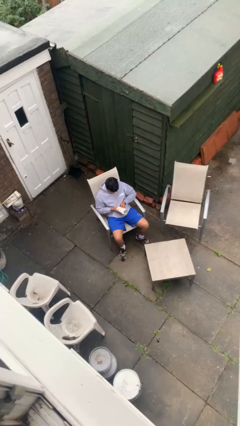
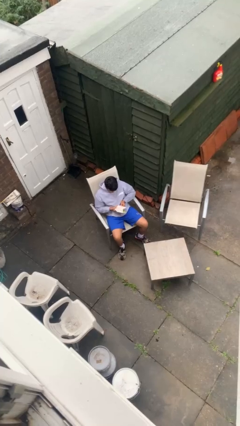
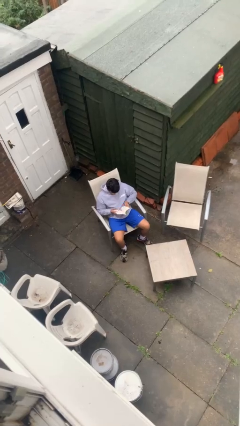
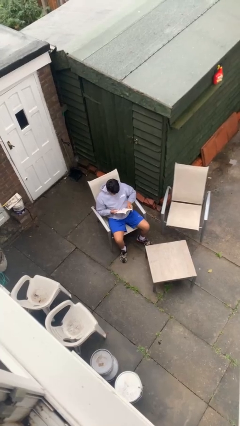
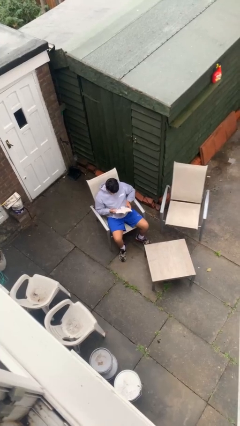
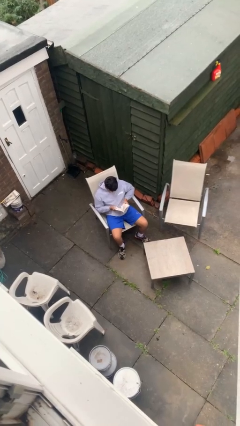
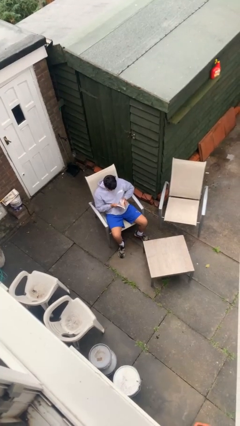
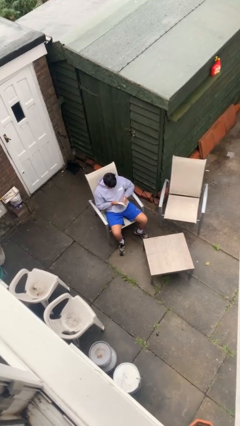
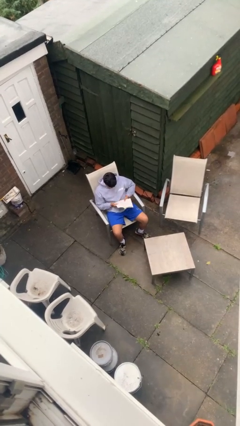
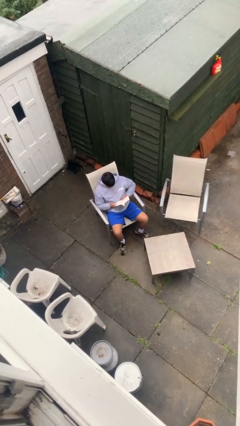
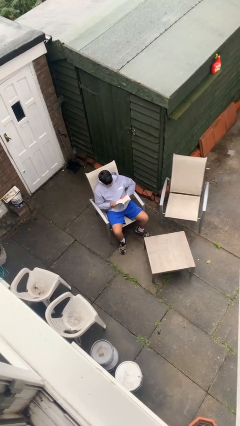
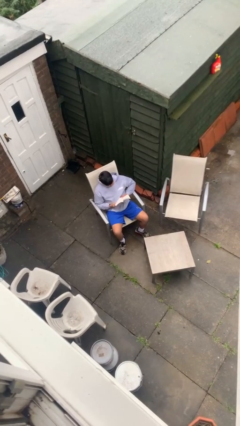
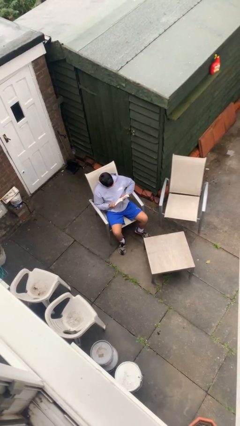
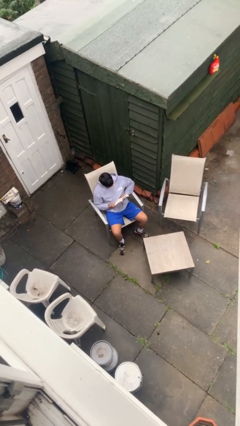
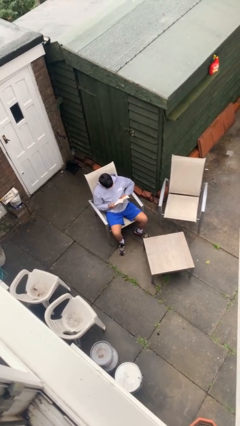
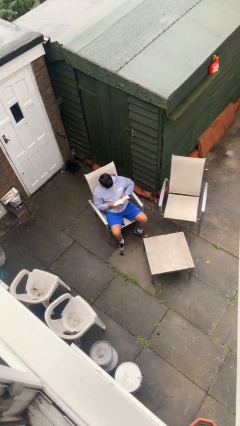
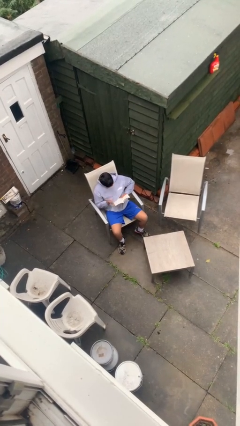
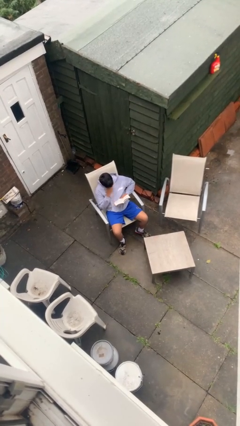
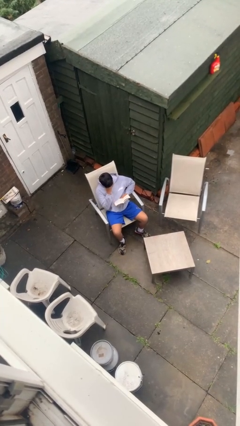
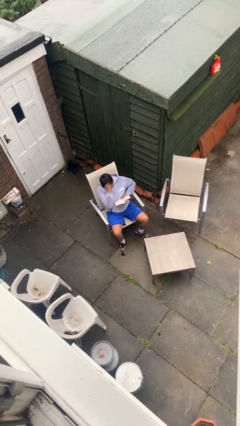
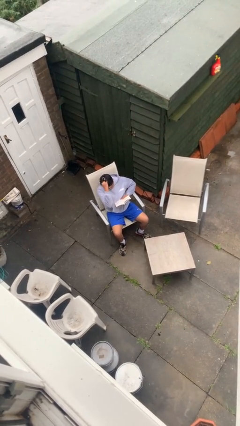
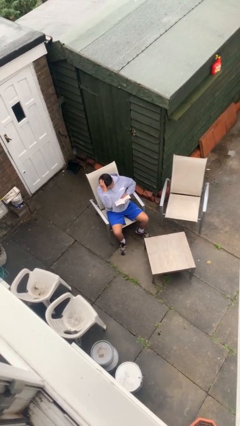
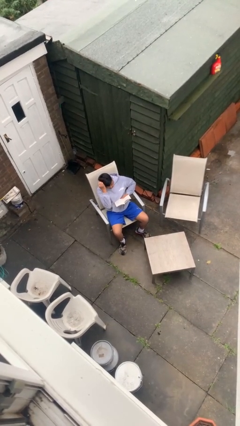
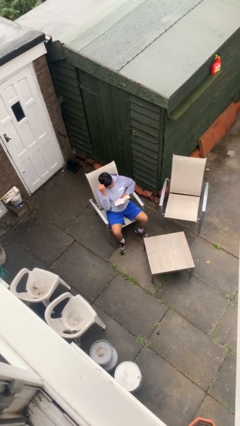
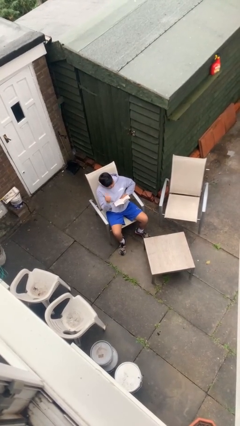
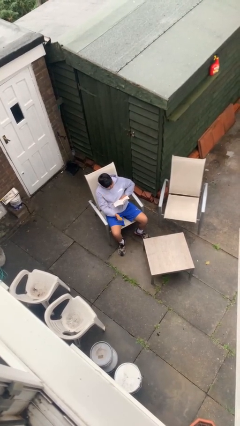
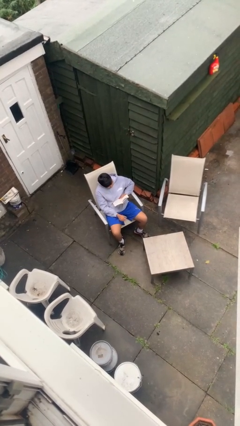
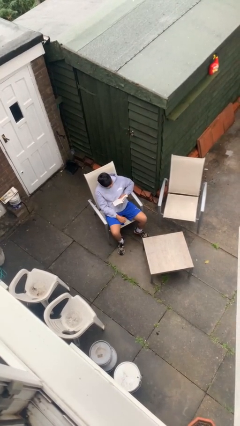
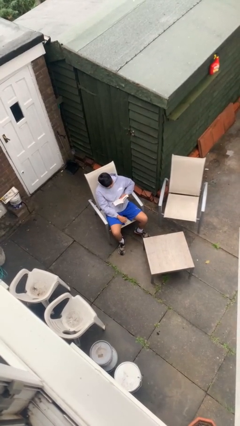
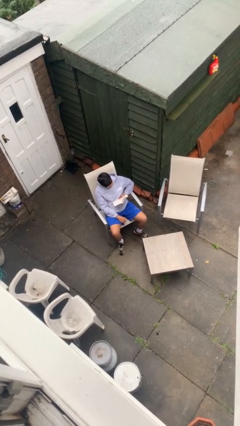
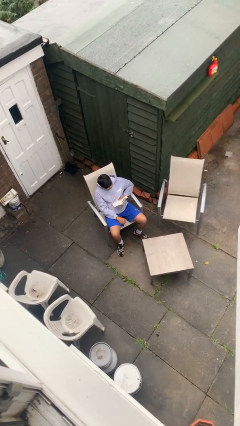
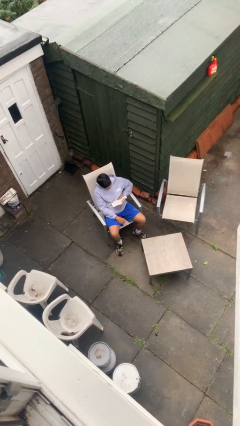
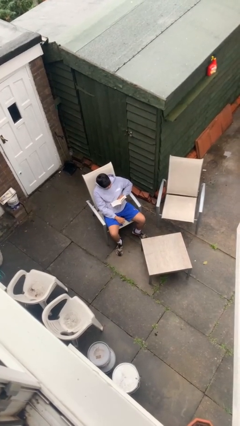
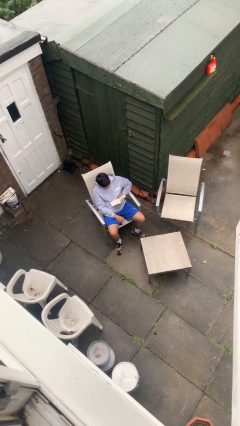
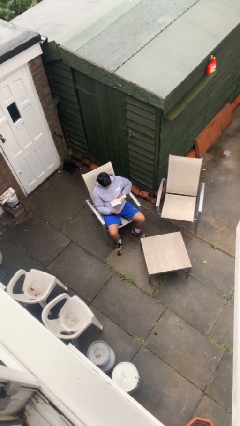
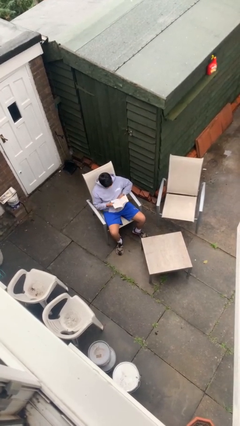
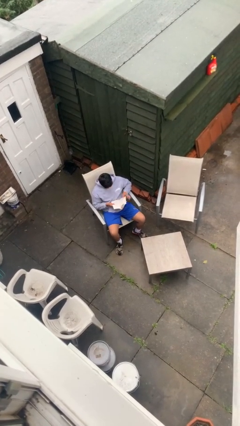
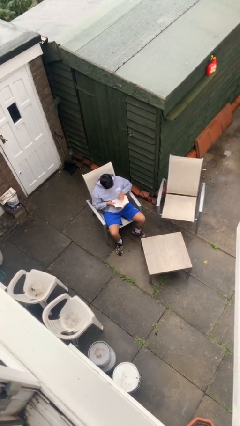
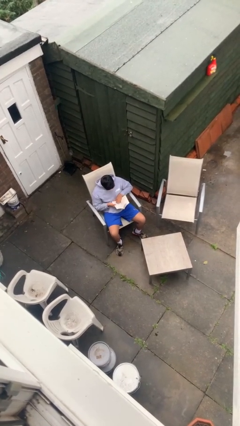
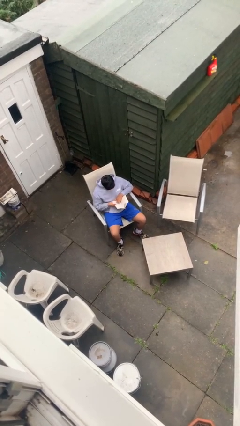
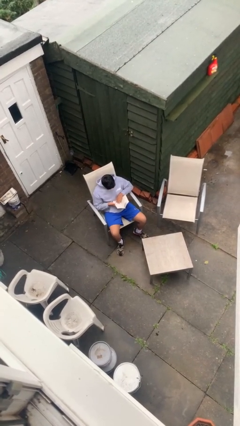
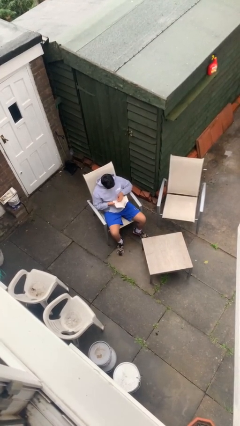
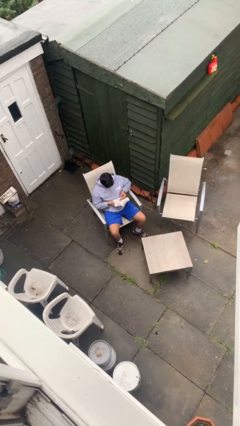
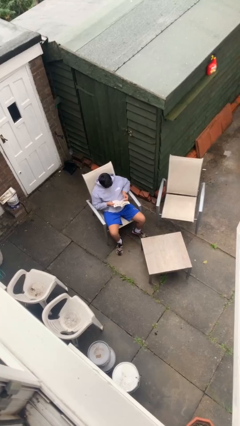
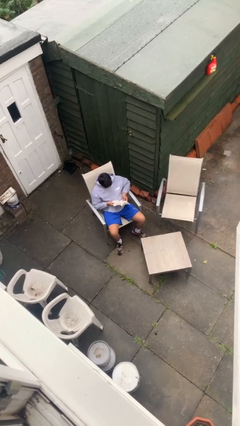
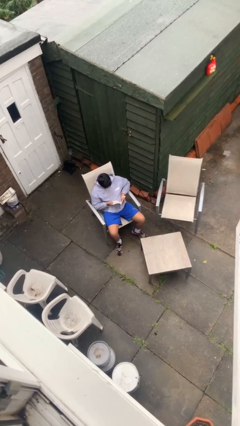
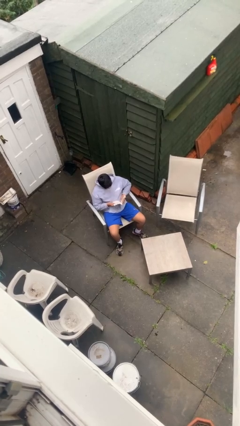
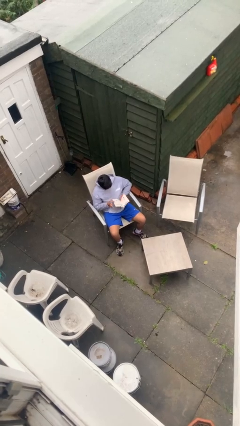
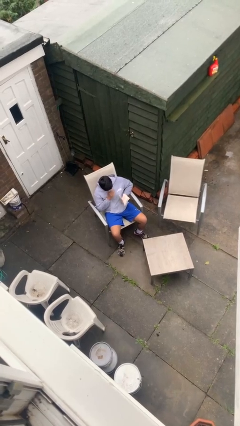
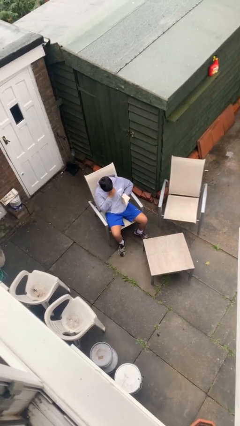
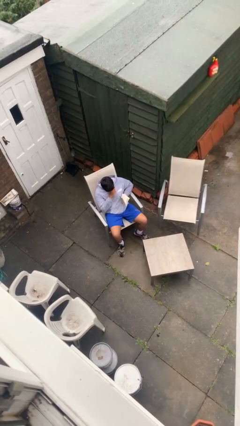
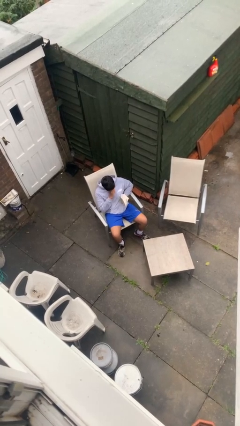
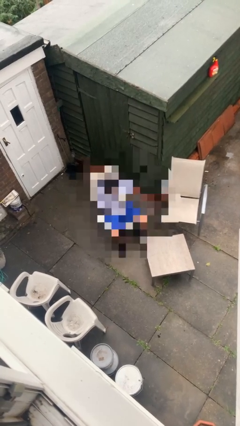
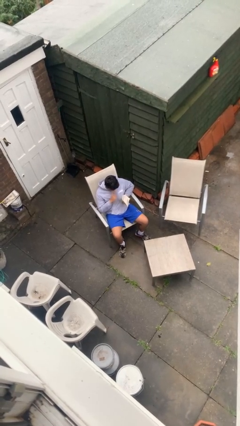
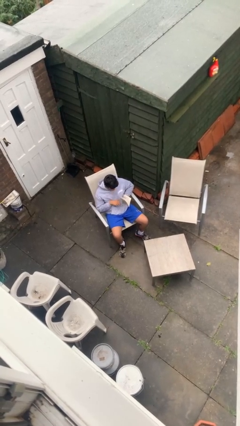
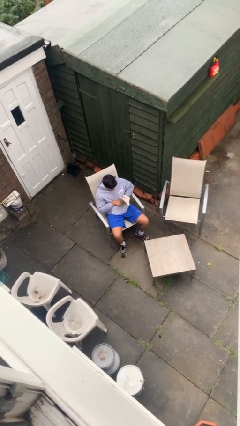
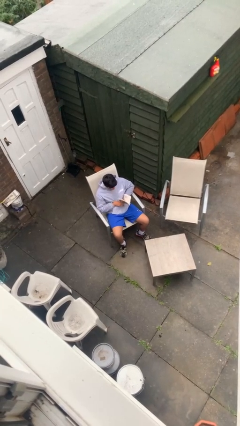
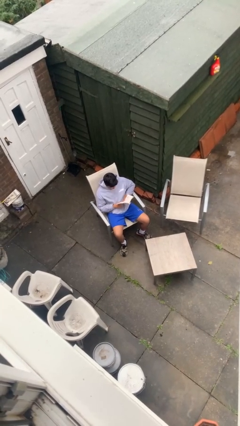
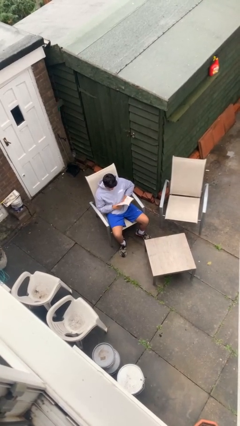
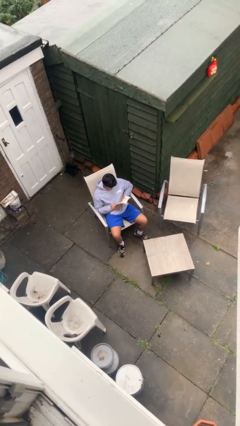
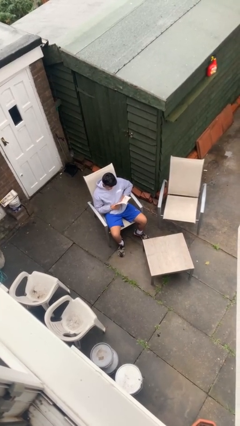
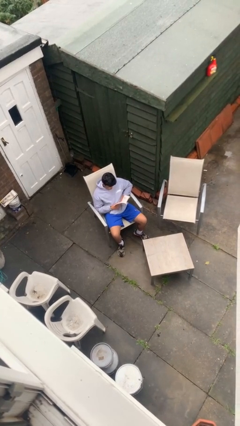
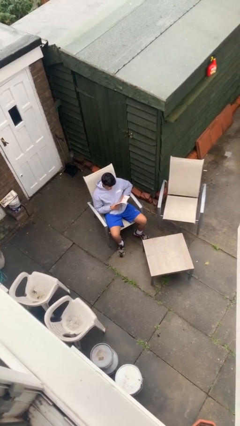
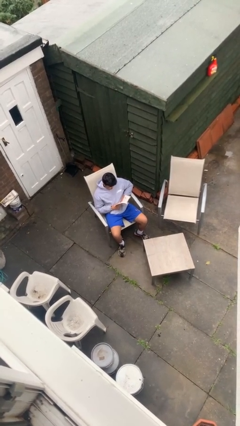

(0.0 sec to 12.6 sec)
person reads document

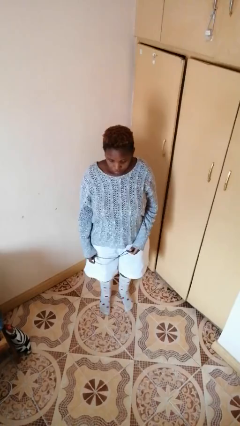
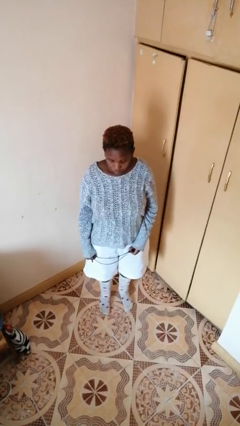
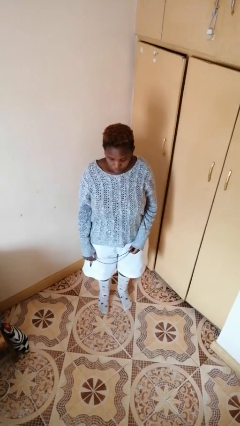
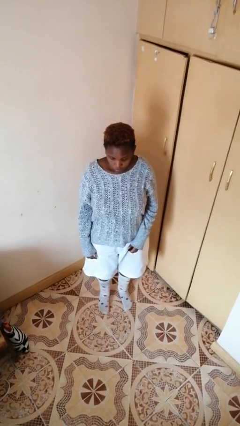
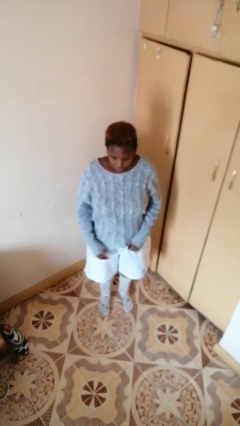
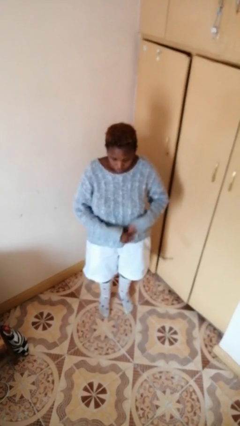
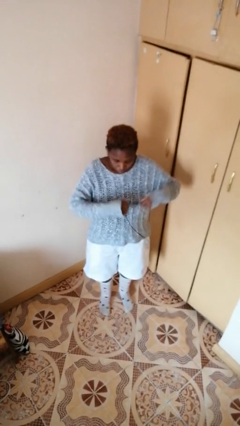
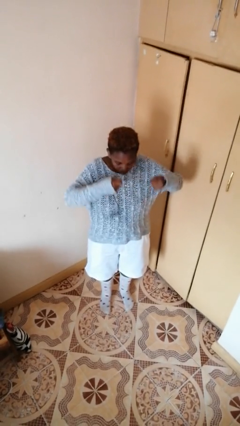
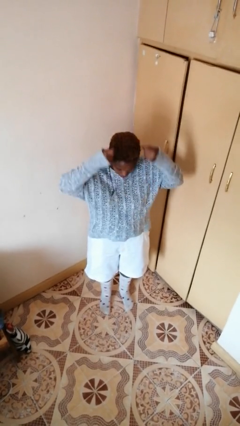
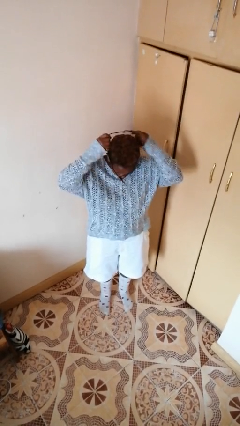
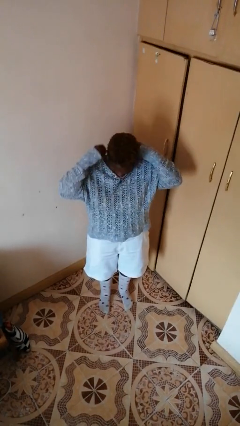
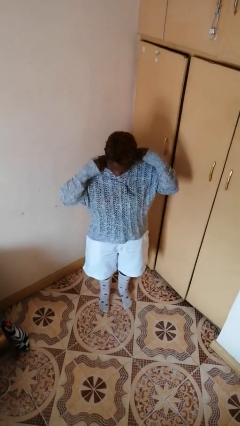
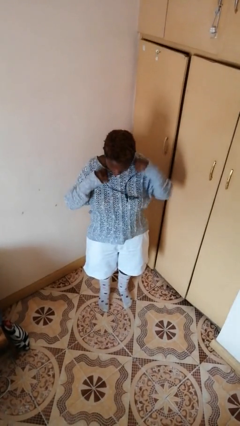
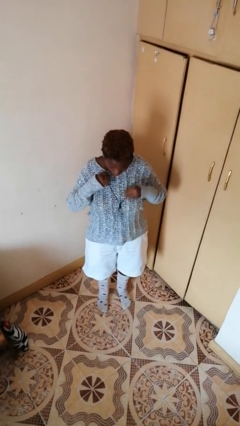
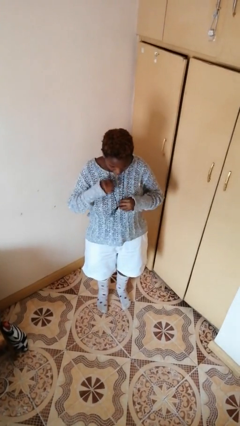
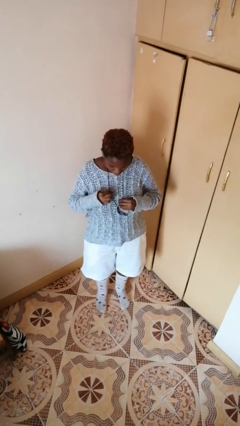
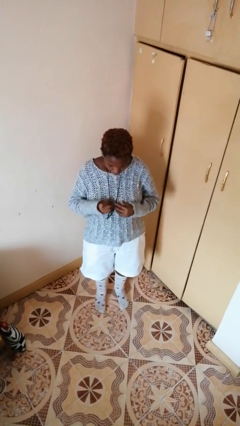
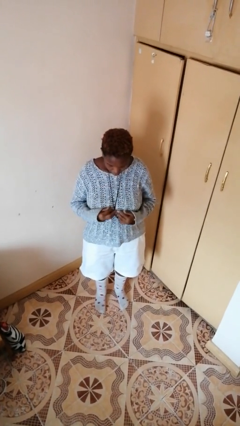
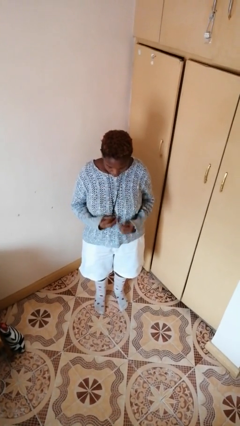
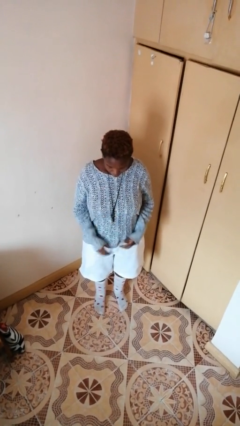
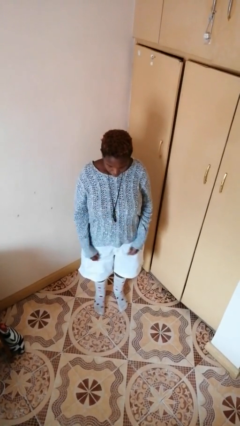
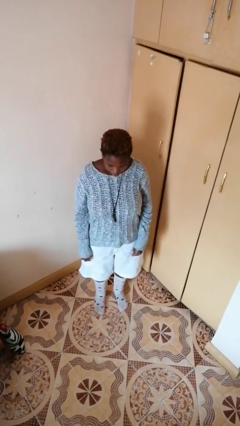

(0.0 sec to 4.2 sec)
person puts on necklace

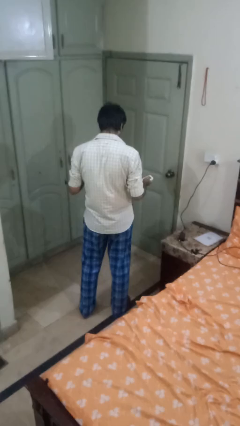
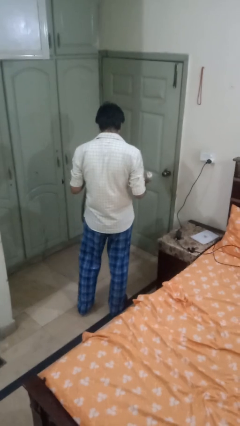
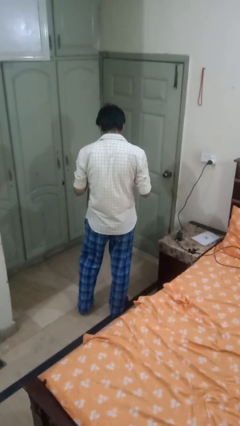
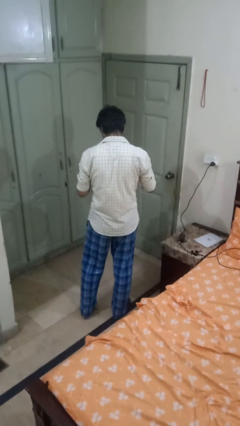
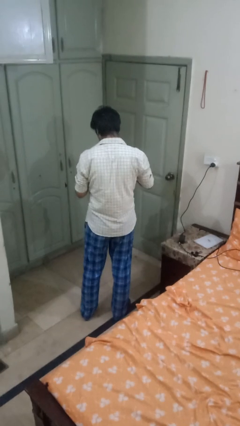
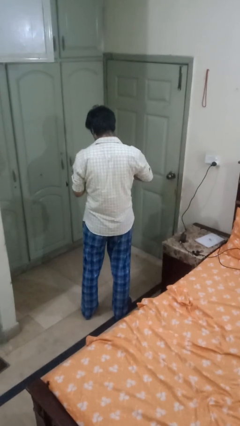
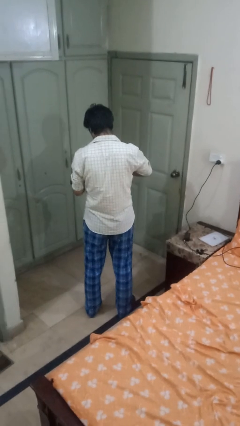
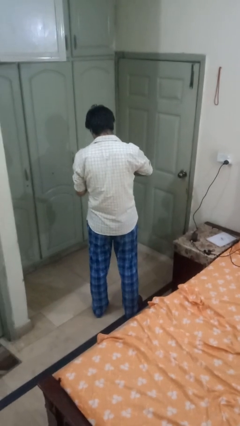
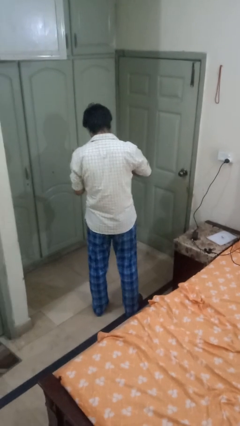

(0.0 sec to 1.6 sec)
person puts object into purse
